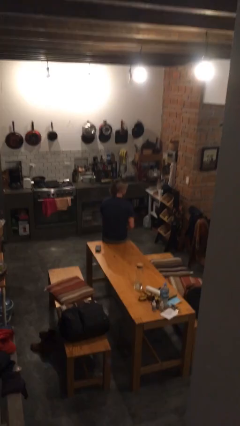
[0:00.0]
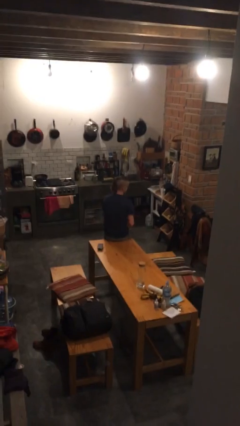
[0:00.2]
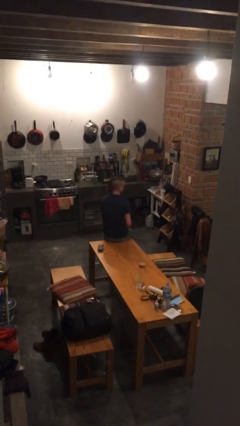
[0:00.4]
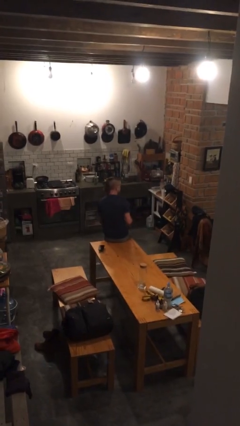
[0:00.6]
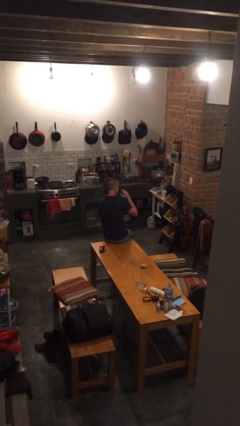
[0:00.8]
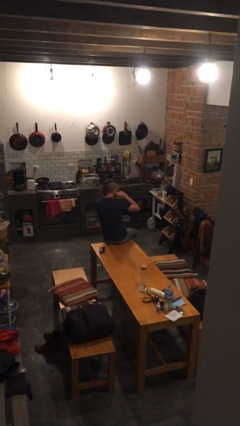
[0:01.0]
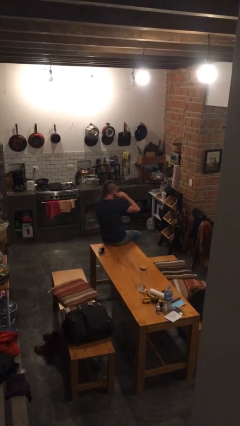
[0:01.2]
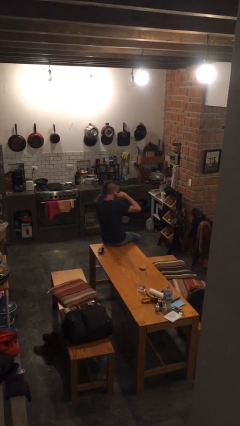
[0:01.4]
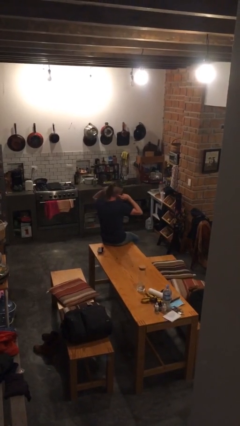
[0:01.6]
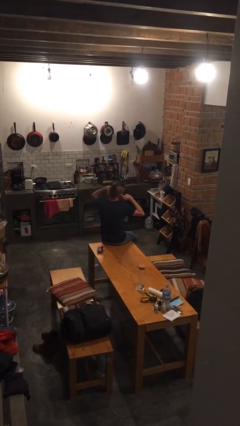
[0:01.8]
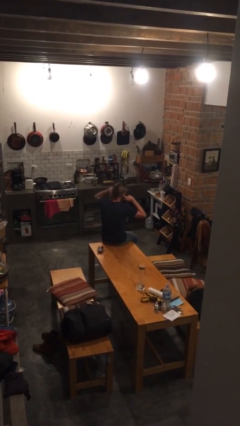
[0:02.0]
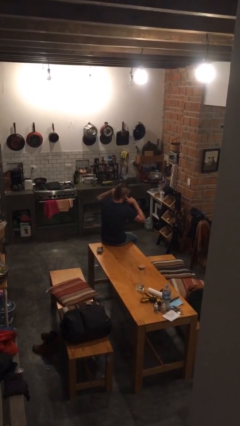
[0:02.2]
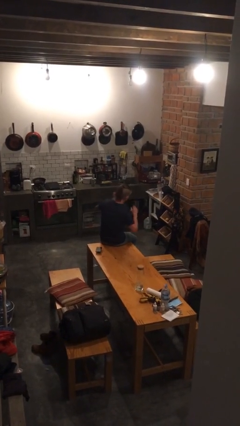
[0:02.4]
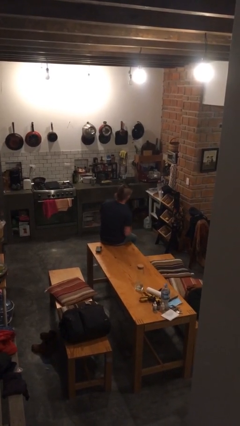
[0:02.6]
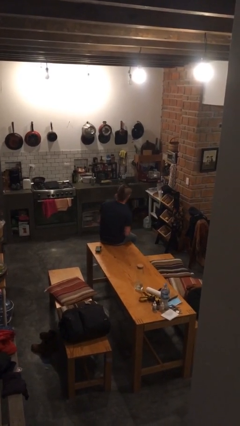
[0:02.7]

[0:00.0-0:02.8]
person puts fingers in ear

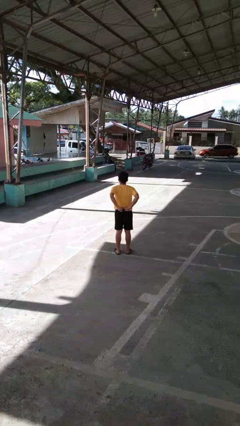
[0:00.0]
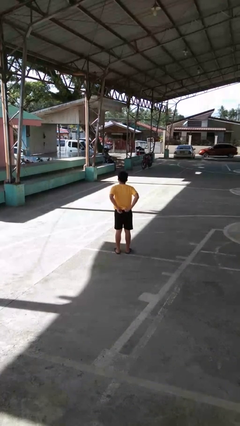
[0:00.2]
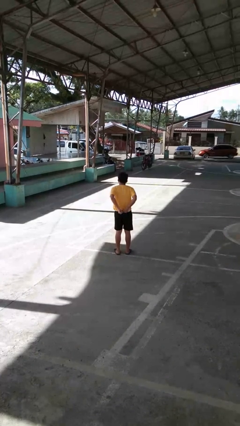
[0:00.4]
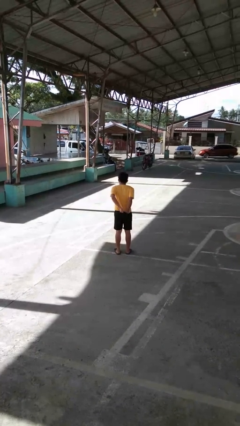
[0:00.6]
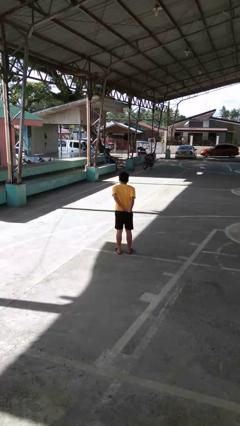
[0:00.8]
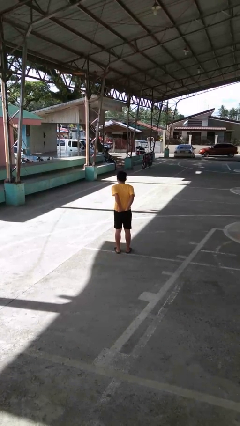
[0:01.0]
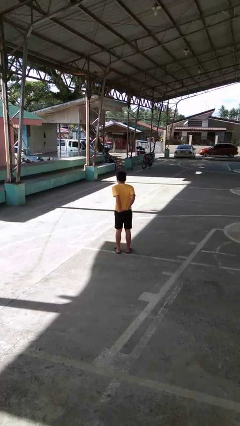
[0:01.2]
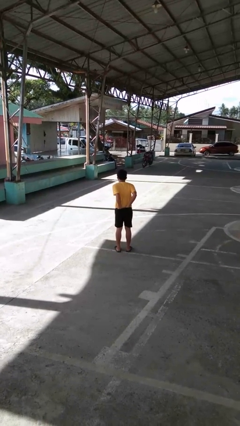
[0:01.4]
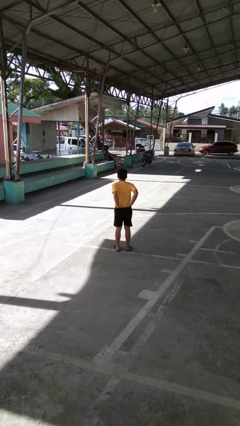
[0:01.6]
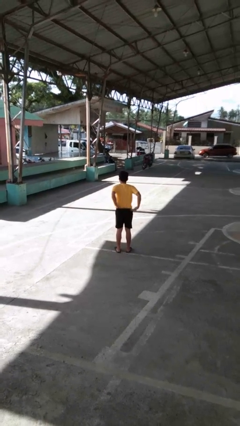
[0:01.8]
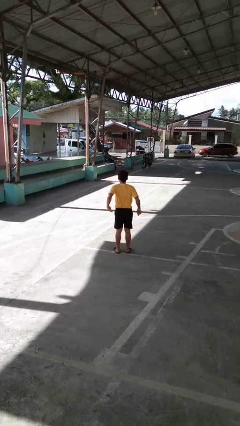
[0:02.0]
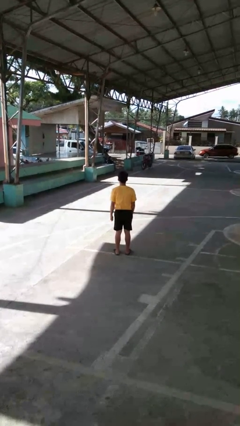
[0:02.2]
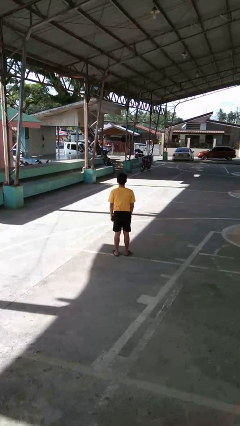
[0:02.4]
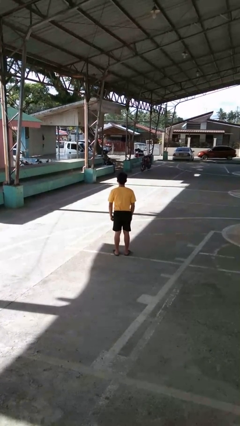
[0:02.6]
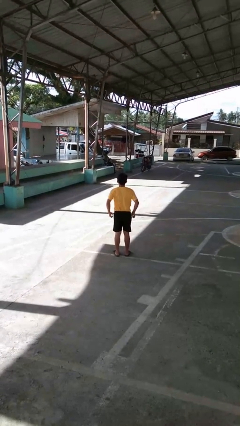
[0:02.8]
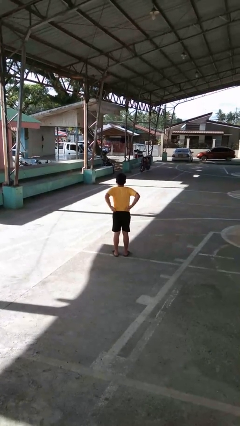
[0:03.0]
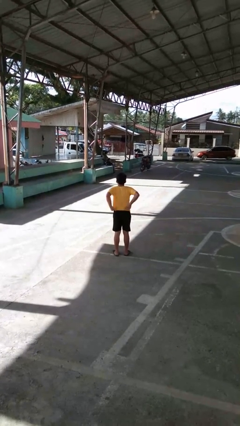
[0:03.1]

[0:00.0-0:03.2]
person tucks in shirt

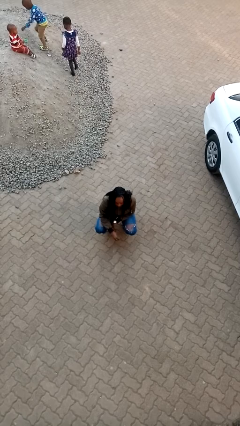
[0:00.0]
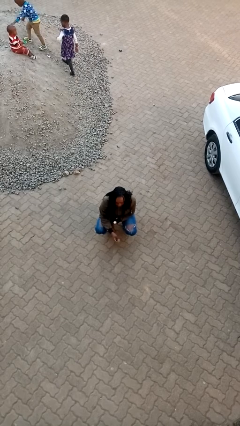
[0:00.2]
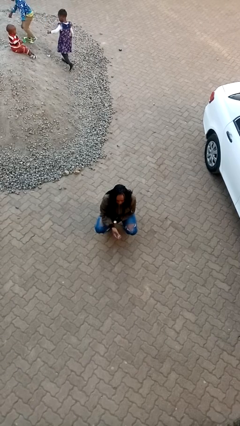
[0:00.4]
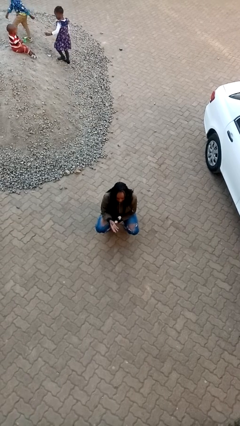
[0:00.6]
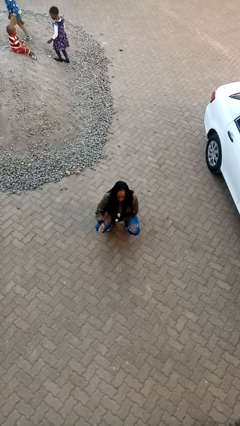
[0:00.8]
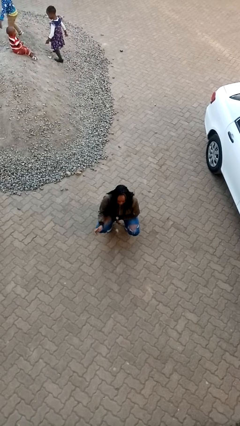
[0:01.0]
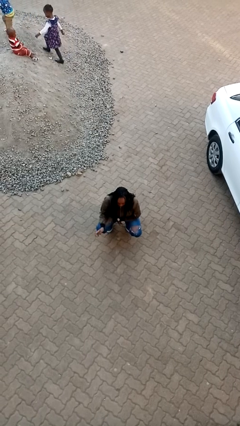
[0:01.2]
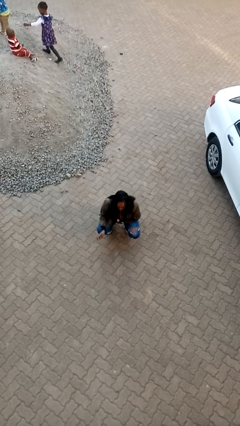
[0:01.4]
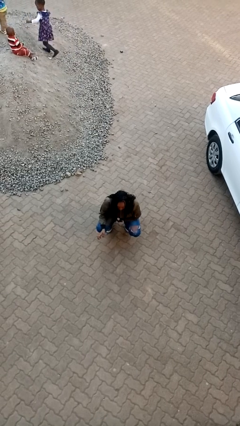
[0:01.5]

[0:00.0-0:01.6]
person throws object into air

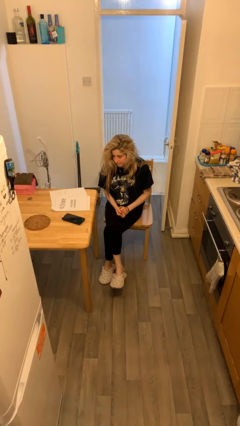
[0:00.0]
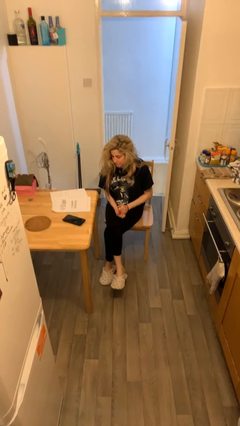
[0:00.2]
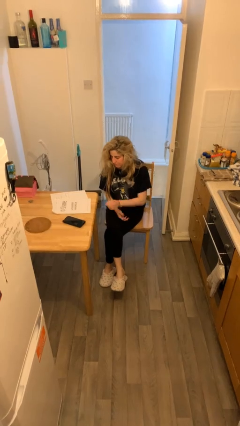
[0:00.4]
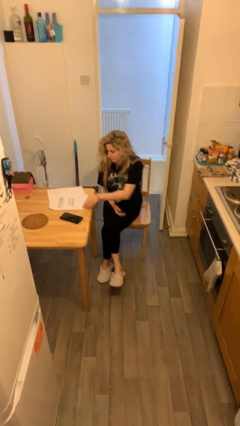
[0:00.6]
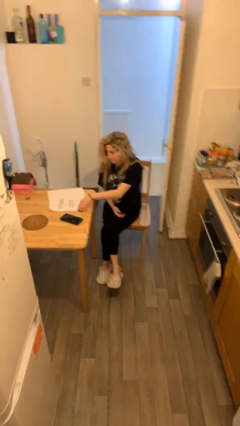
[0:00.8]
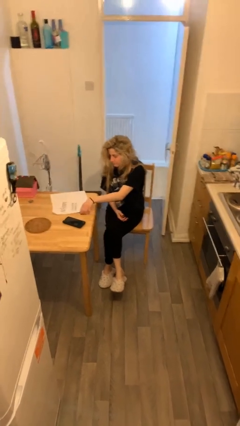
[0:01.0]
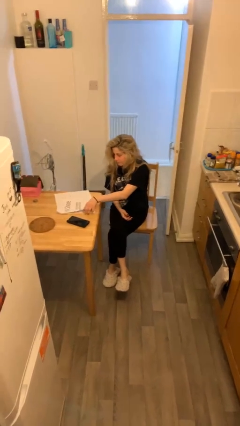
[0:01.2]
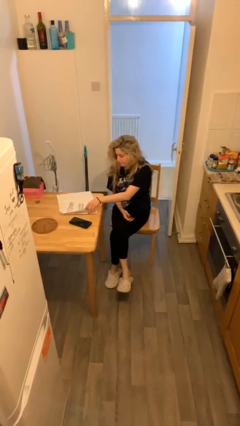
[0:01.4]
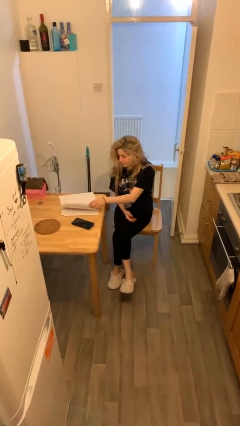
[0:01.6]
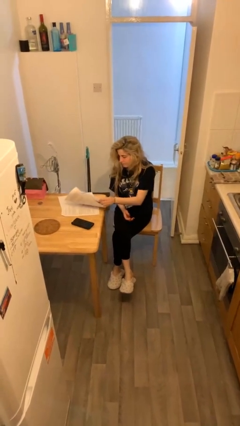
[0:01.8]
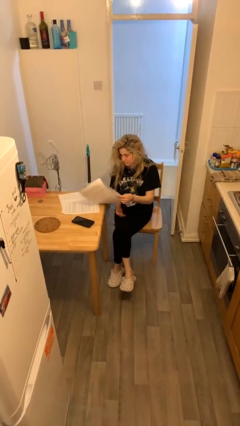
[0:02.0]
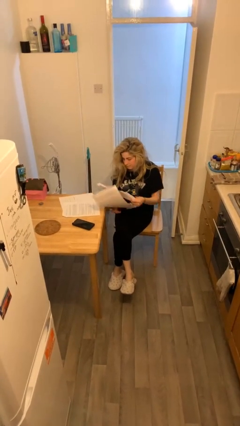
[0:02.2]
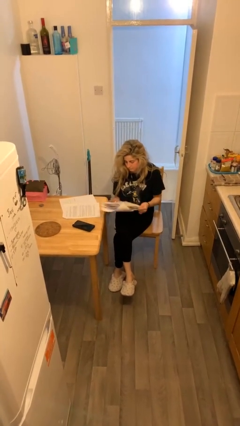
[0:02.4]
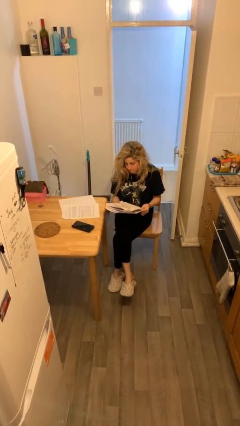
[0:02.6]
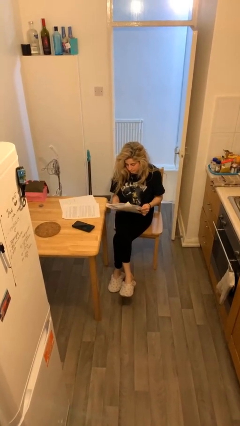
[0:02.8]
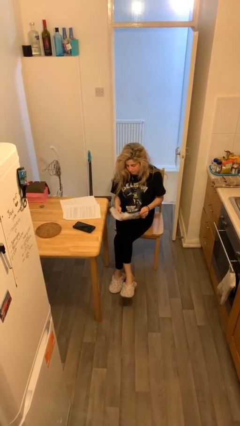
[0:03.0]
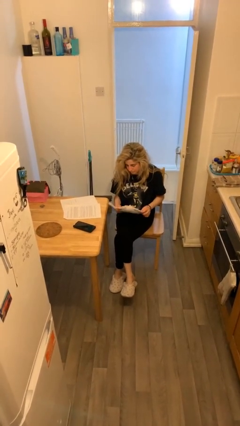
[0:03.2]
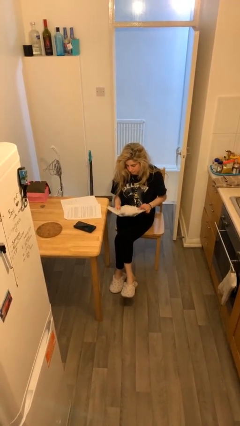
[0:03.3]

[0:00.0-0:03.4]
person picks up object from table

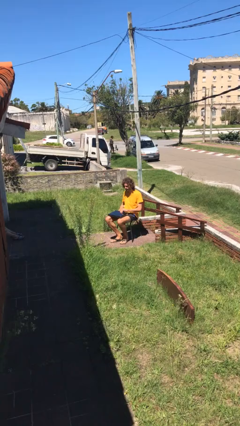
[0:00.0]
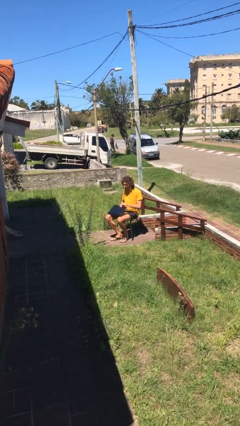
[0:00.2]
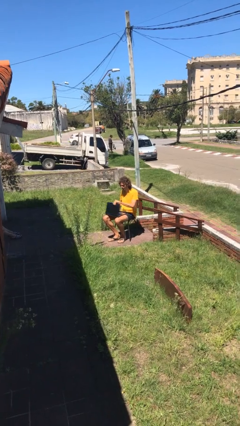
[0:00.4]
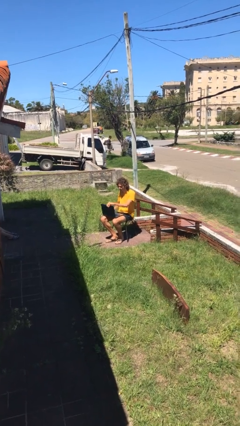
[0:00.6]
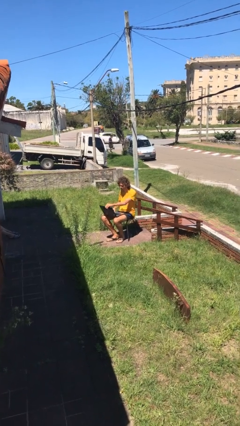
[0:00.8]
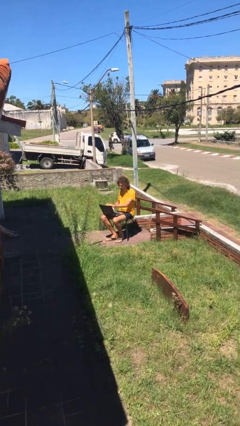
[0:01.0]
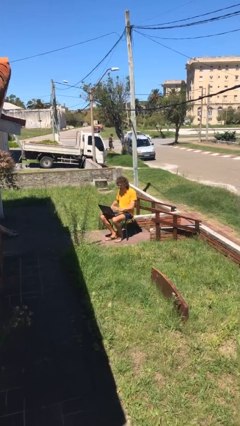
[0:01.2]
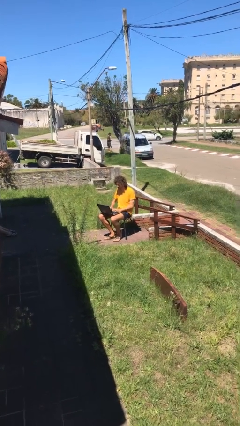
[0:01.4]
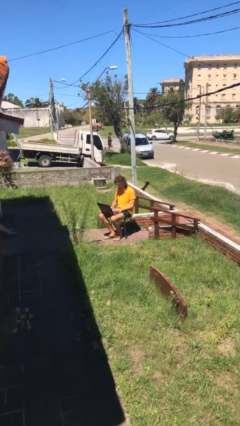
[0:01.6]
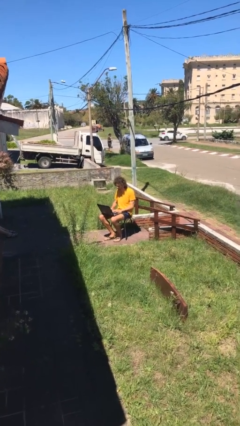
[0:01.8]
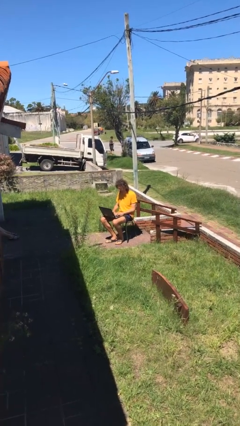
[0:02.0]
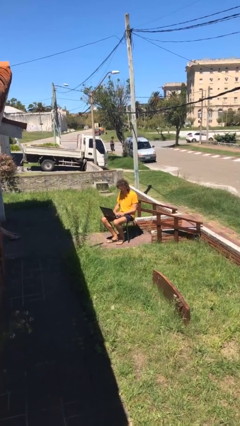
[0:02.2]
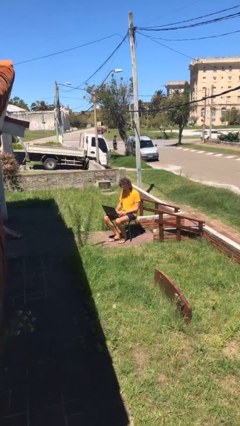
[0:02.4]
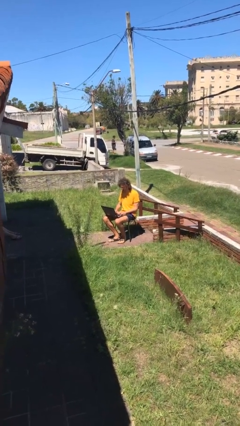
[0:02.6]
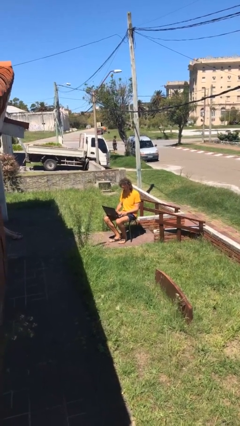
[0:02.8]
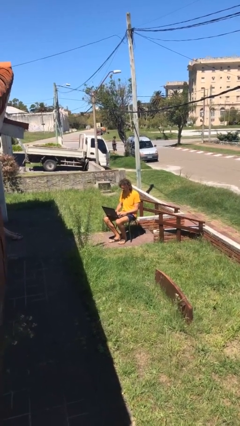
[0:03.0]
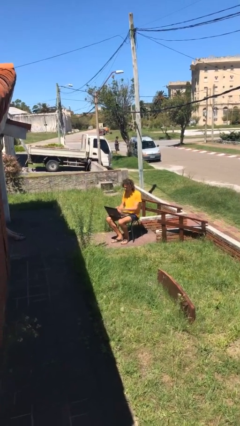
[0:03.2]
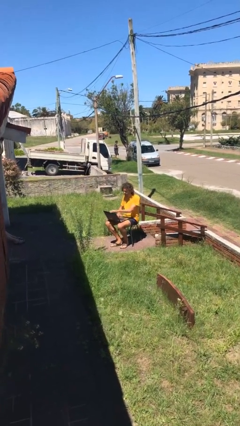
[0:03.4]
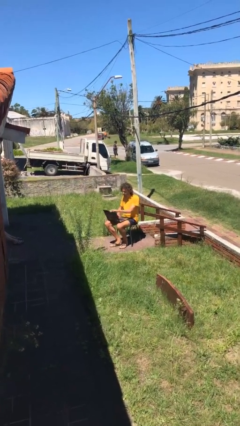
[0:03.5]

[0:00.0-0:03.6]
person interacts with laptop

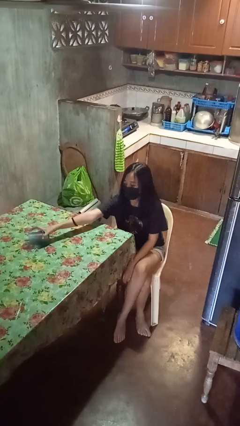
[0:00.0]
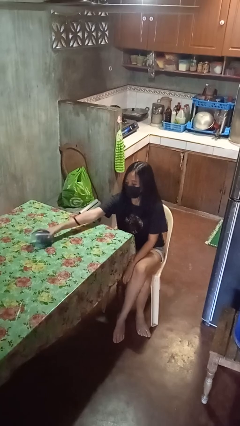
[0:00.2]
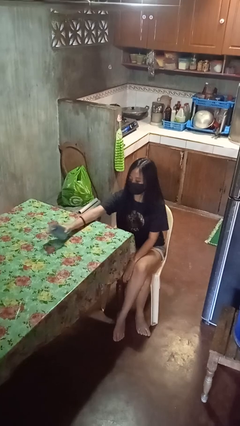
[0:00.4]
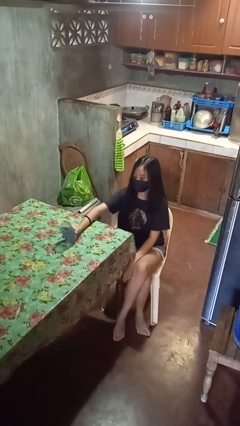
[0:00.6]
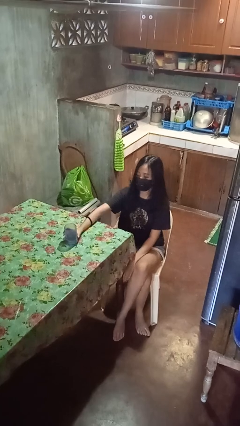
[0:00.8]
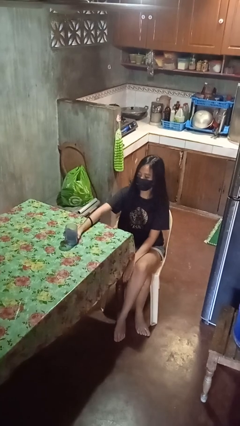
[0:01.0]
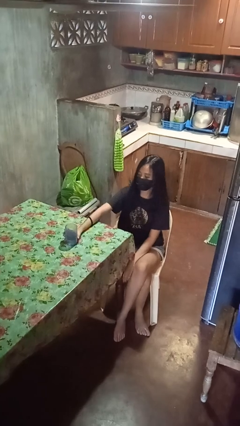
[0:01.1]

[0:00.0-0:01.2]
person sets upright glass

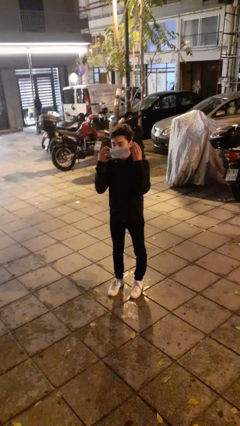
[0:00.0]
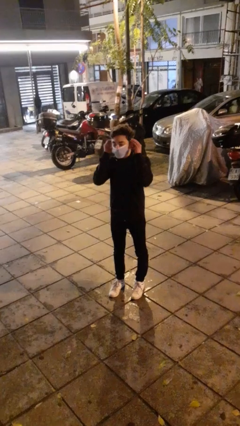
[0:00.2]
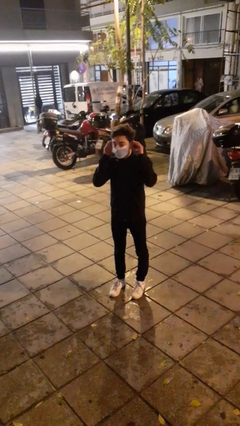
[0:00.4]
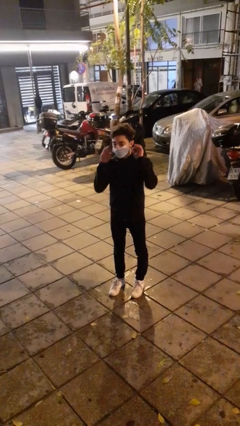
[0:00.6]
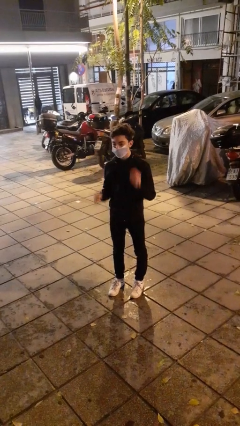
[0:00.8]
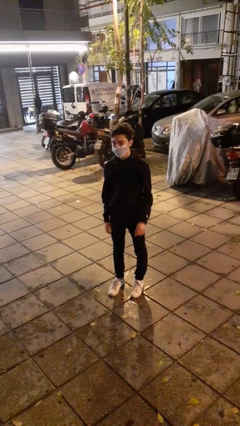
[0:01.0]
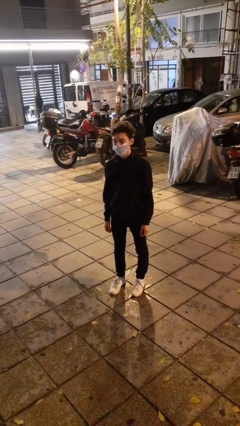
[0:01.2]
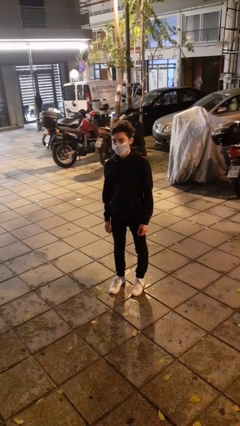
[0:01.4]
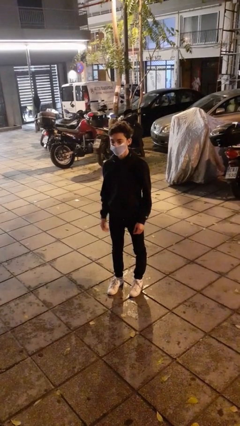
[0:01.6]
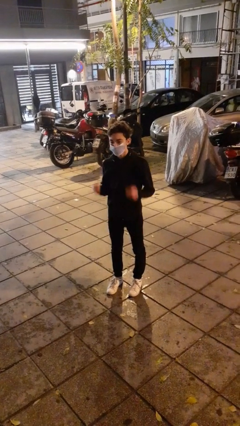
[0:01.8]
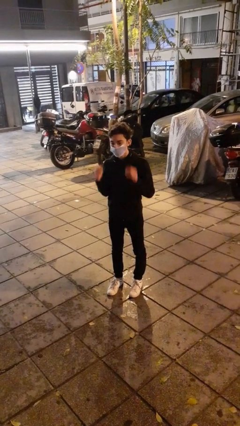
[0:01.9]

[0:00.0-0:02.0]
person puts on facemask
